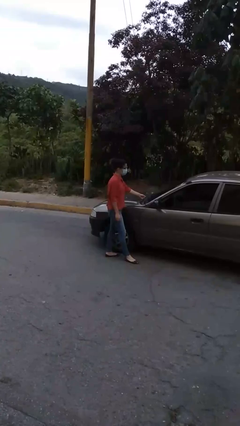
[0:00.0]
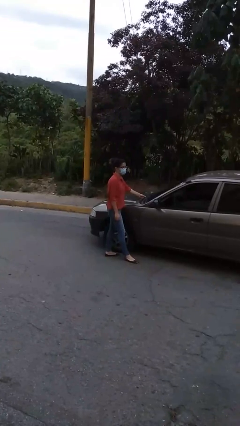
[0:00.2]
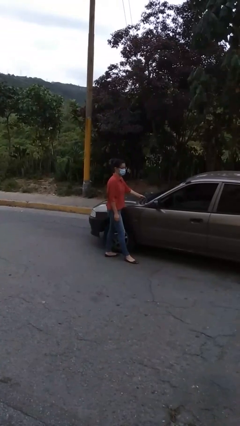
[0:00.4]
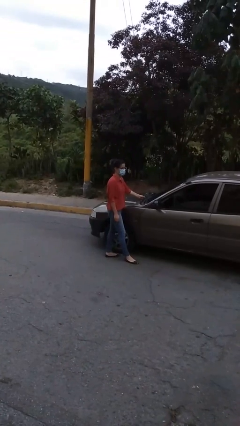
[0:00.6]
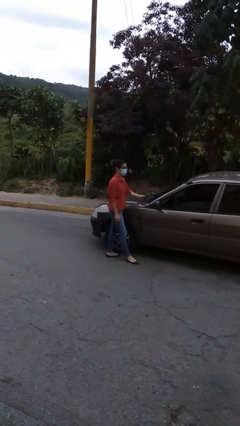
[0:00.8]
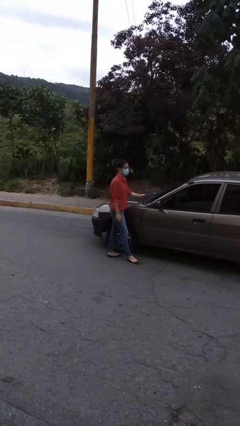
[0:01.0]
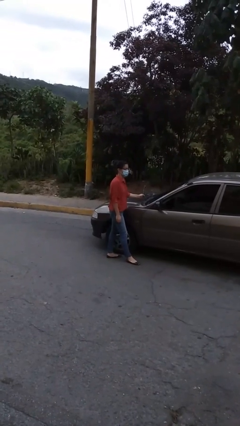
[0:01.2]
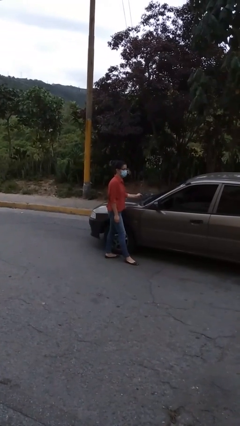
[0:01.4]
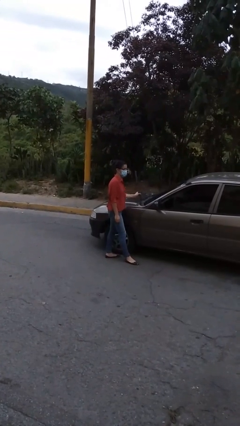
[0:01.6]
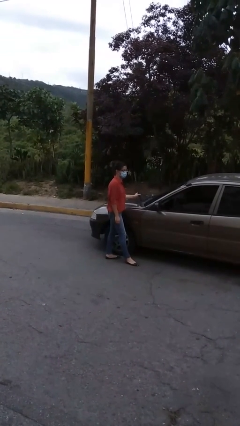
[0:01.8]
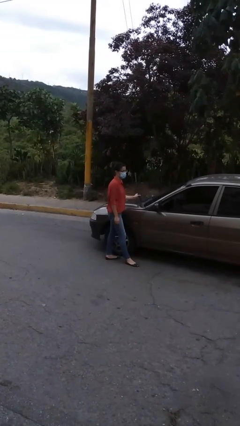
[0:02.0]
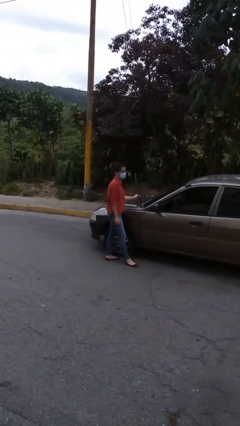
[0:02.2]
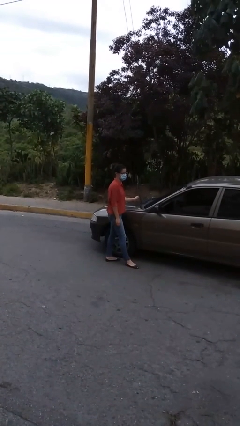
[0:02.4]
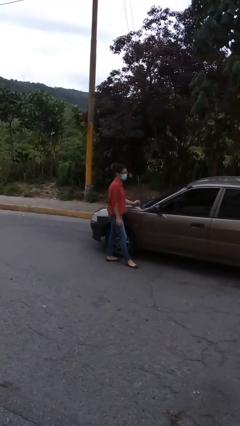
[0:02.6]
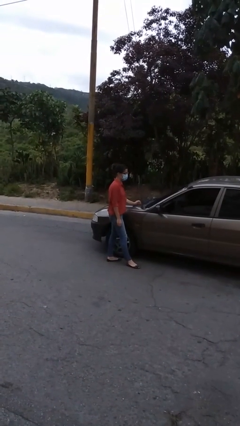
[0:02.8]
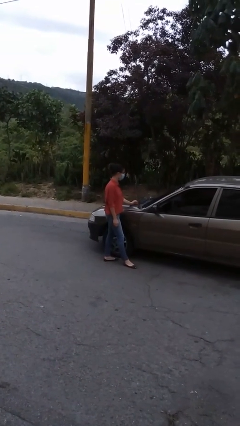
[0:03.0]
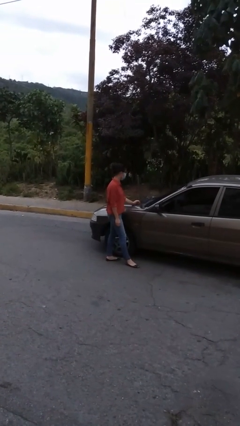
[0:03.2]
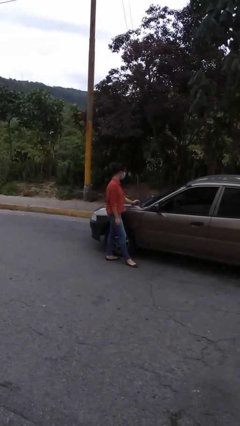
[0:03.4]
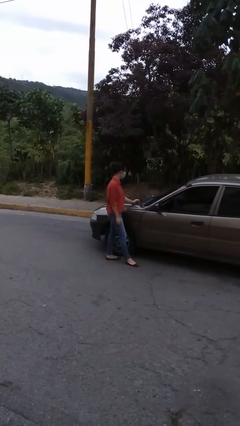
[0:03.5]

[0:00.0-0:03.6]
person flips up car wipers

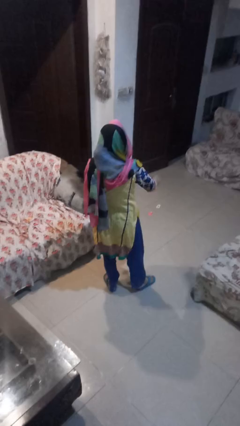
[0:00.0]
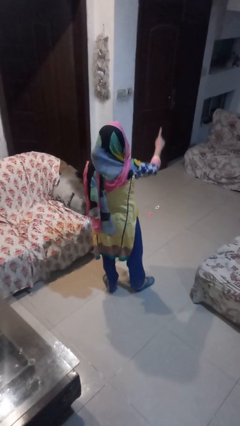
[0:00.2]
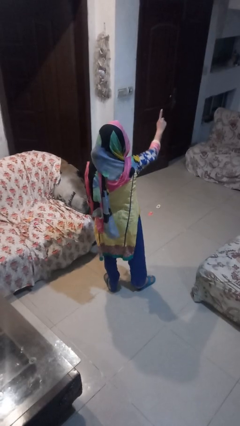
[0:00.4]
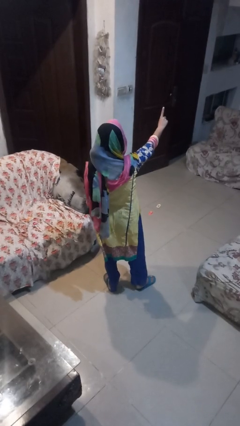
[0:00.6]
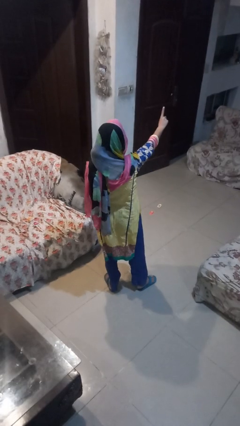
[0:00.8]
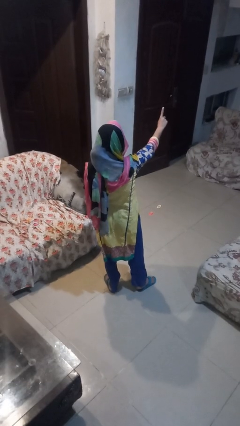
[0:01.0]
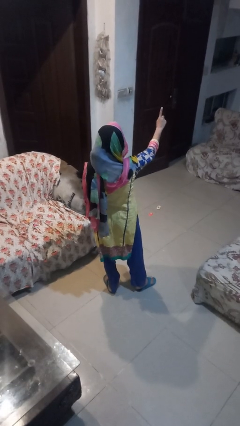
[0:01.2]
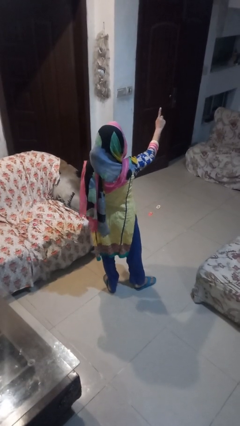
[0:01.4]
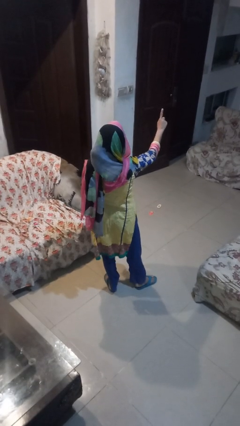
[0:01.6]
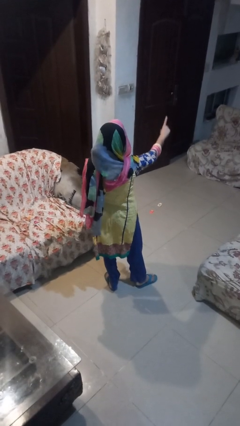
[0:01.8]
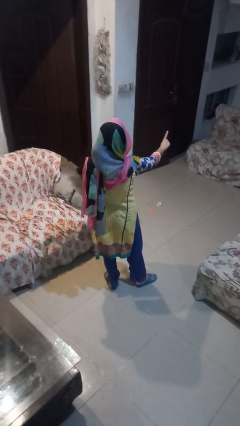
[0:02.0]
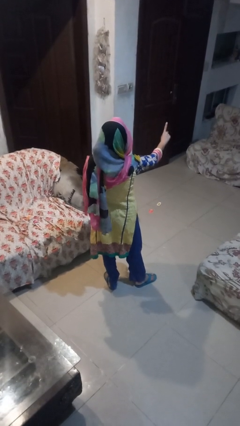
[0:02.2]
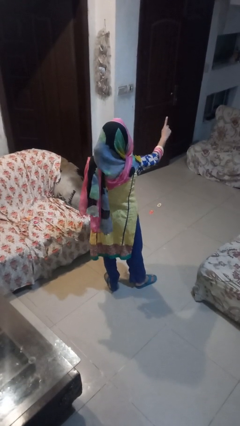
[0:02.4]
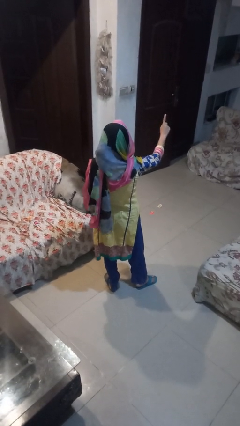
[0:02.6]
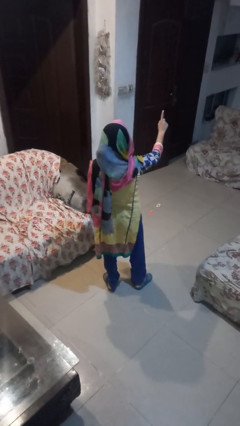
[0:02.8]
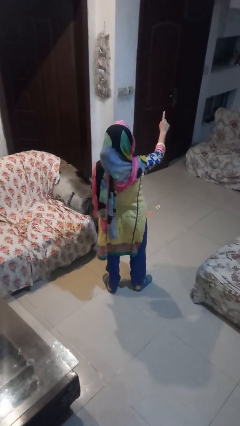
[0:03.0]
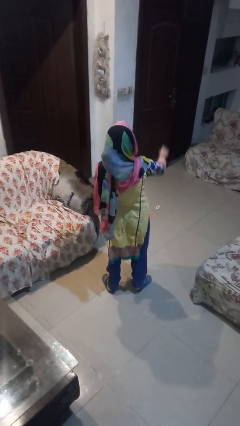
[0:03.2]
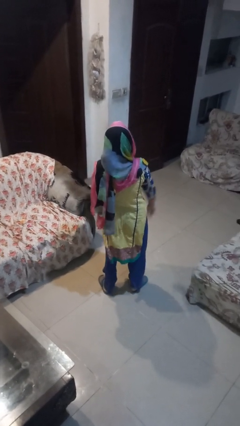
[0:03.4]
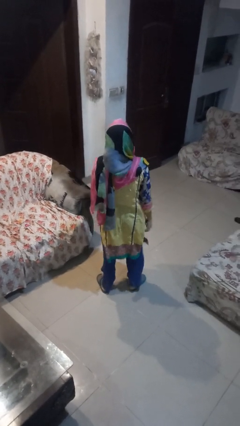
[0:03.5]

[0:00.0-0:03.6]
person gestures number one

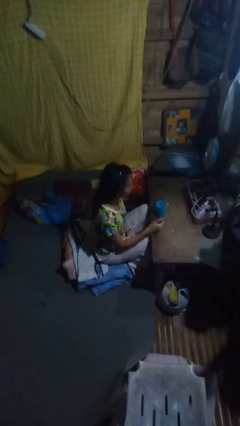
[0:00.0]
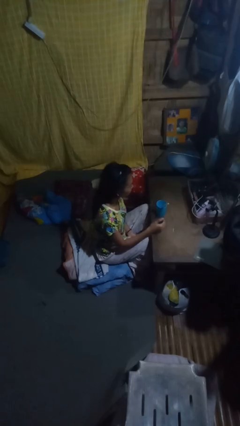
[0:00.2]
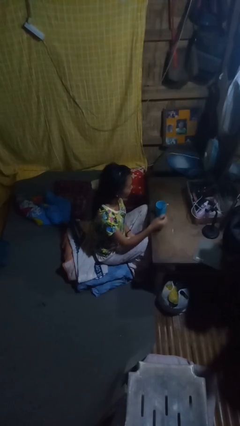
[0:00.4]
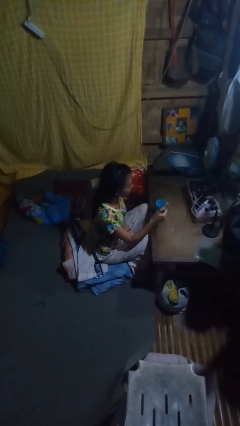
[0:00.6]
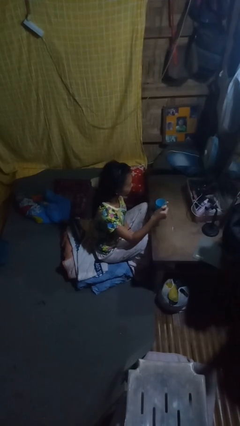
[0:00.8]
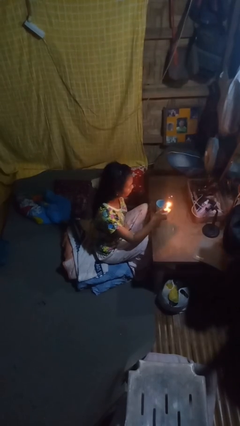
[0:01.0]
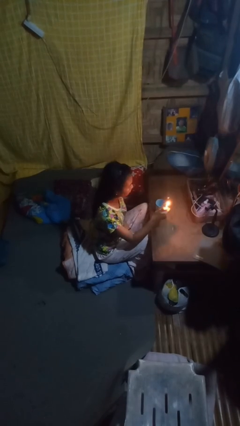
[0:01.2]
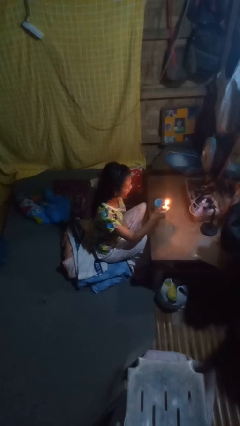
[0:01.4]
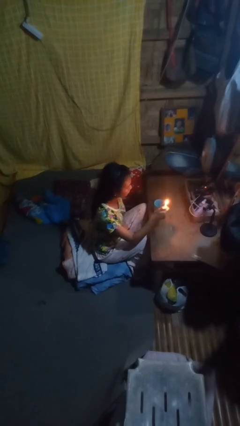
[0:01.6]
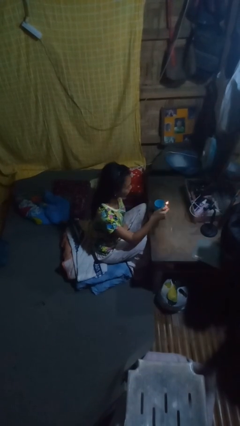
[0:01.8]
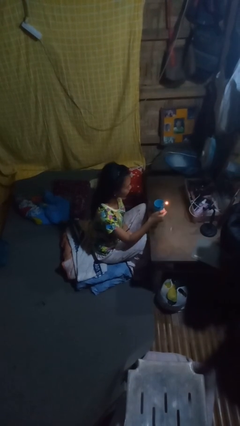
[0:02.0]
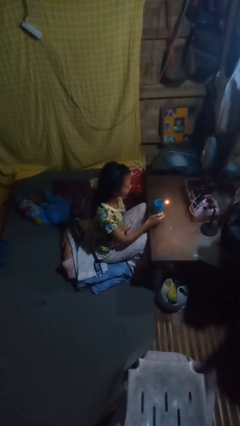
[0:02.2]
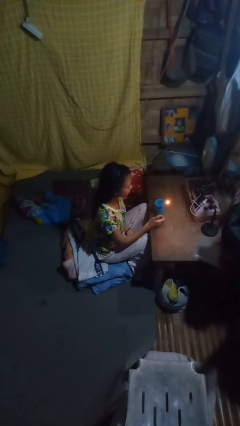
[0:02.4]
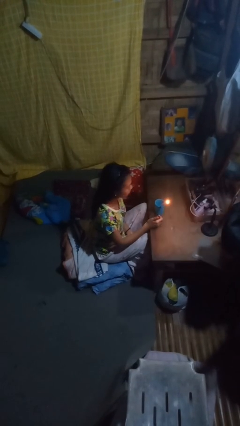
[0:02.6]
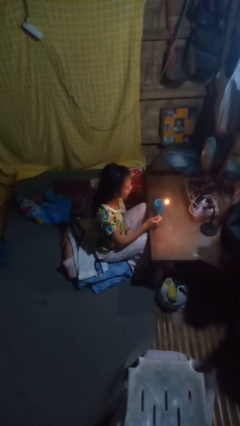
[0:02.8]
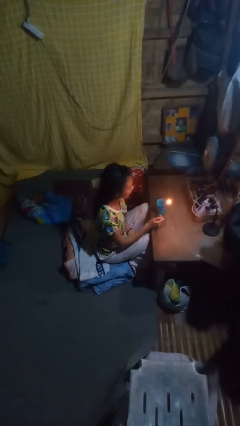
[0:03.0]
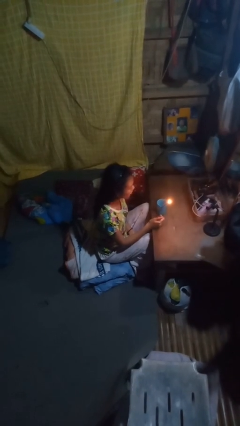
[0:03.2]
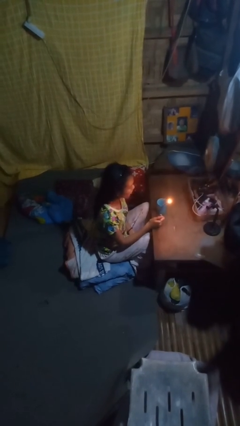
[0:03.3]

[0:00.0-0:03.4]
person lights candle

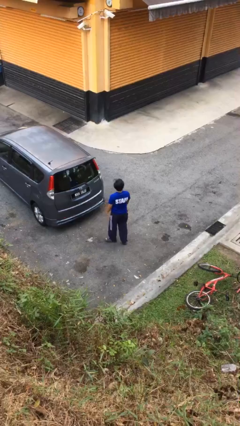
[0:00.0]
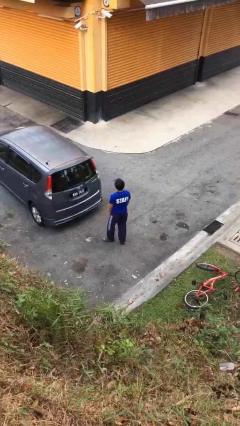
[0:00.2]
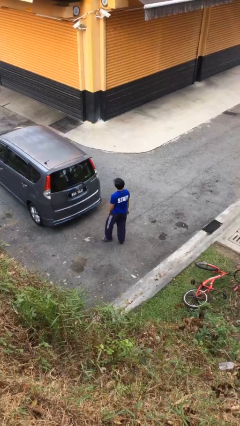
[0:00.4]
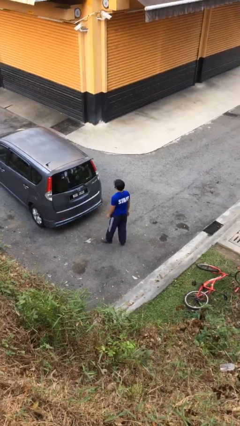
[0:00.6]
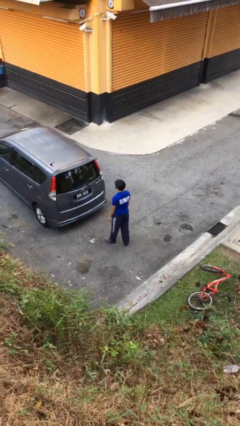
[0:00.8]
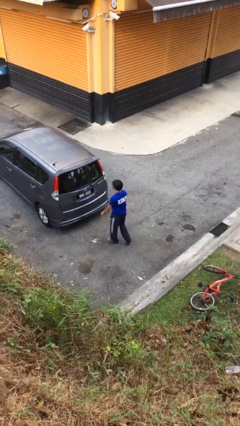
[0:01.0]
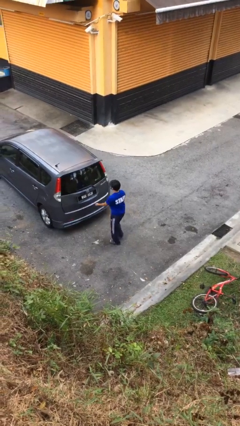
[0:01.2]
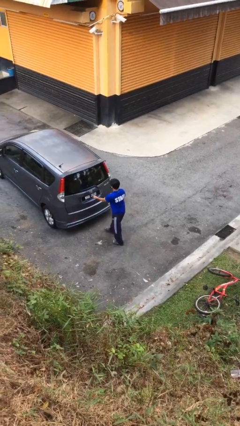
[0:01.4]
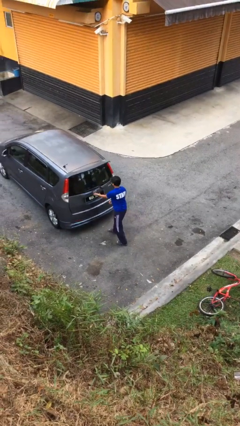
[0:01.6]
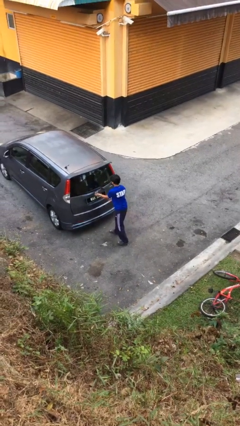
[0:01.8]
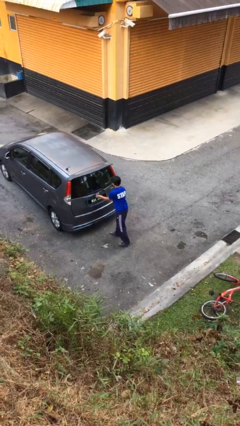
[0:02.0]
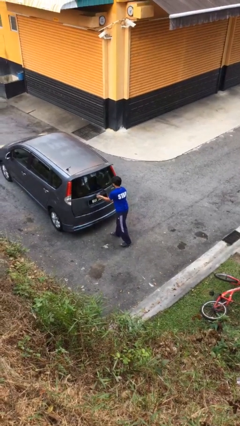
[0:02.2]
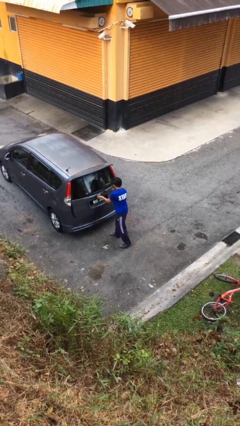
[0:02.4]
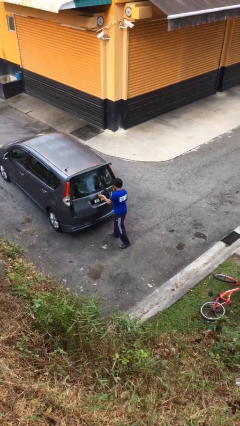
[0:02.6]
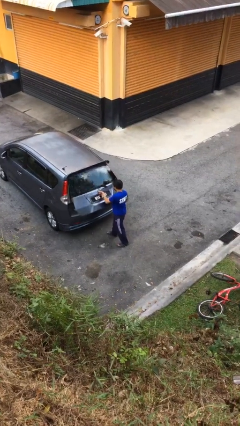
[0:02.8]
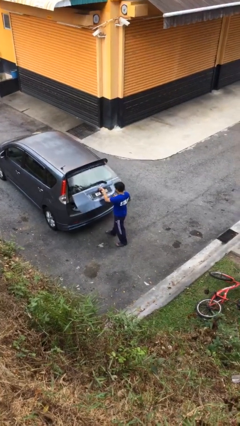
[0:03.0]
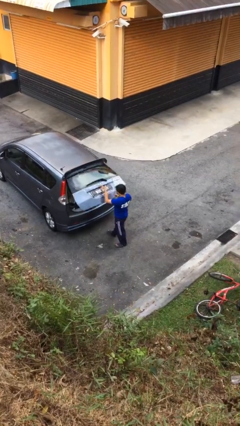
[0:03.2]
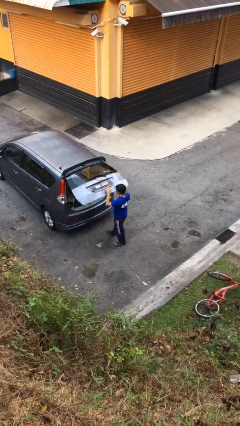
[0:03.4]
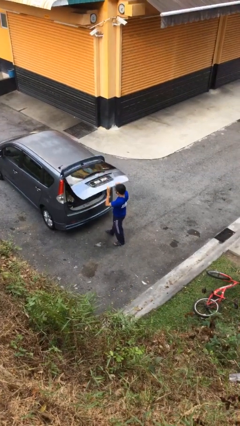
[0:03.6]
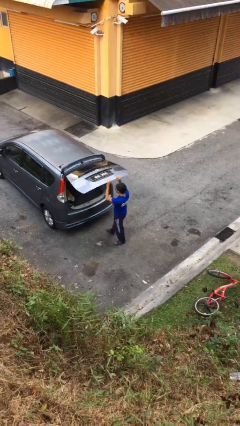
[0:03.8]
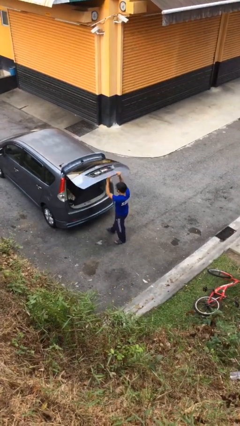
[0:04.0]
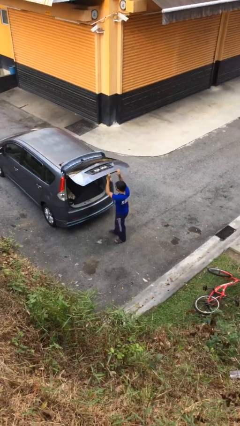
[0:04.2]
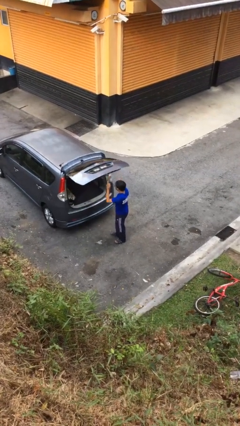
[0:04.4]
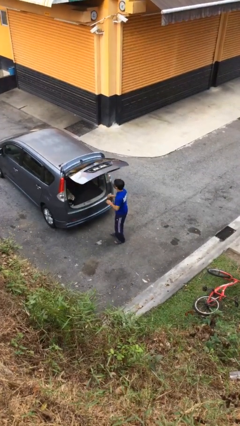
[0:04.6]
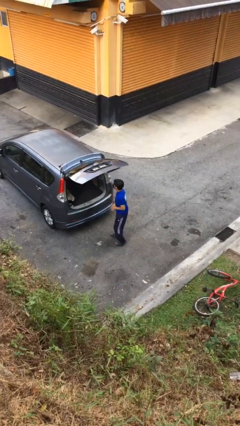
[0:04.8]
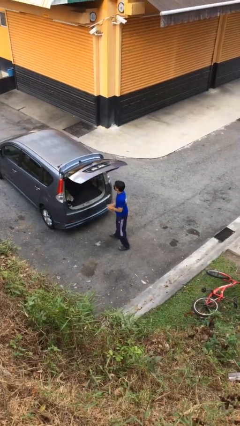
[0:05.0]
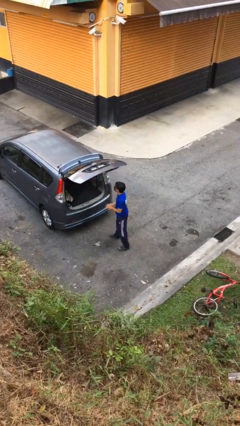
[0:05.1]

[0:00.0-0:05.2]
person opens car trunk

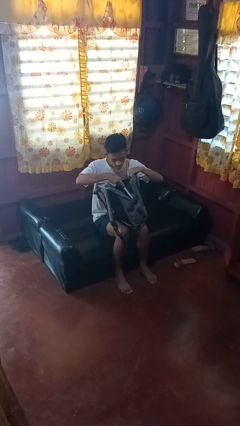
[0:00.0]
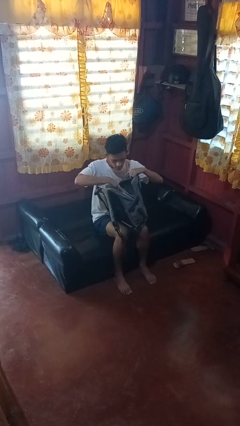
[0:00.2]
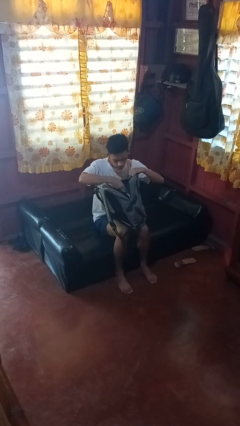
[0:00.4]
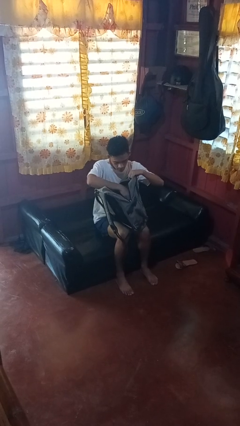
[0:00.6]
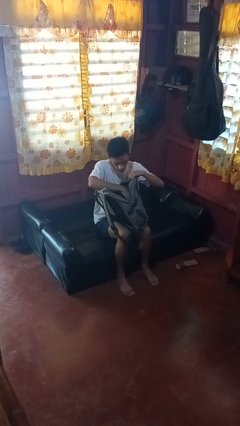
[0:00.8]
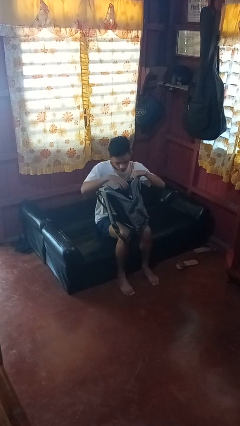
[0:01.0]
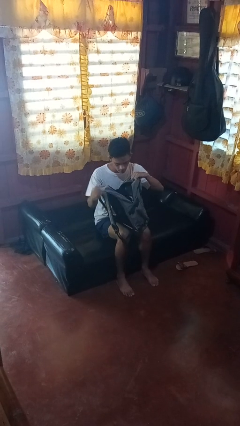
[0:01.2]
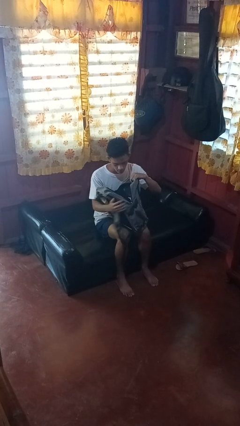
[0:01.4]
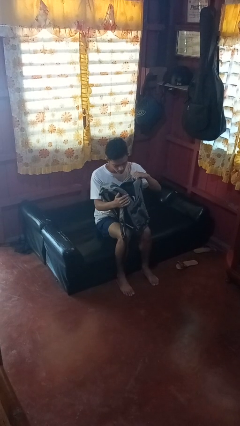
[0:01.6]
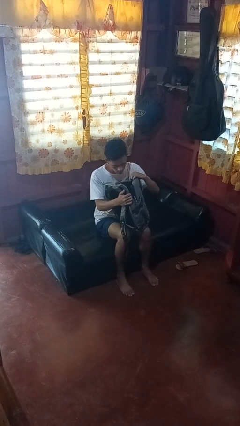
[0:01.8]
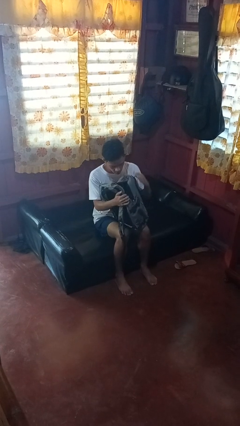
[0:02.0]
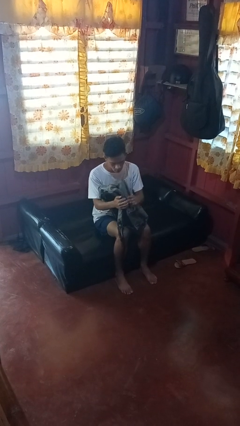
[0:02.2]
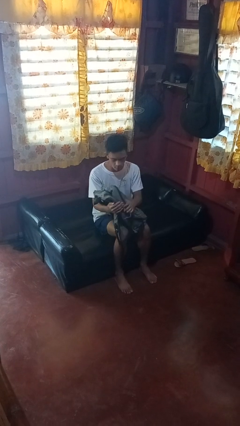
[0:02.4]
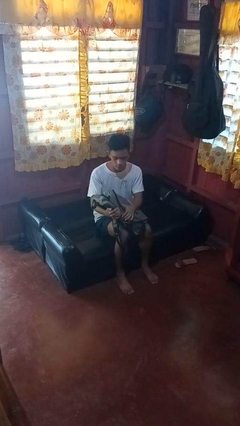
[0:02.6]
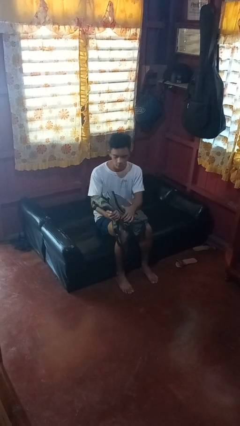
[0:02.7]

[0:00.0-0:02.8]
person puts object into backpack
